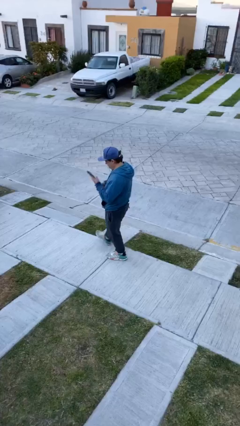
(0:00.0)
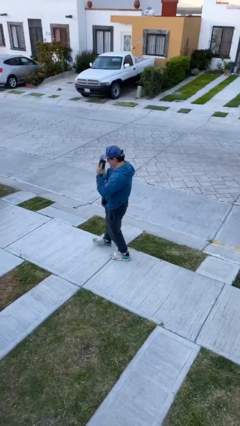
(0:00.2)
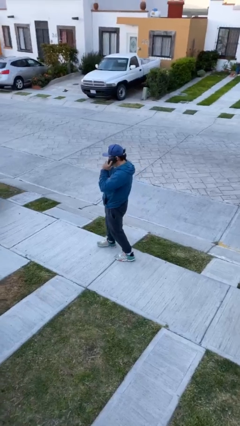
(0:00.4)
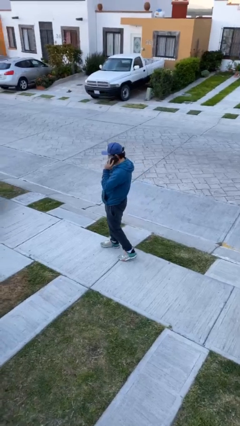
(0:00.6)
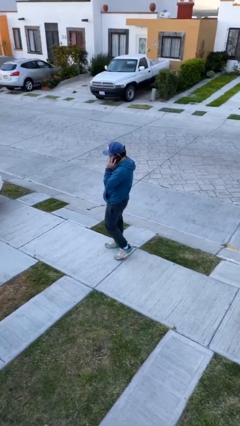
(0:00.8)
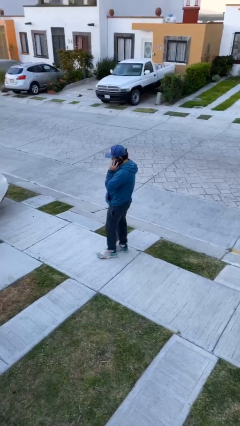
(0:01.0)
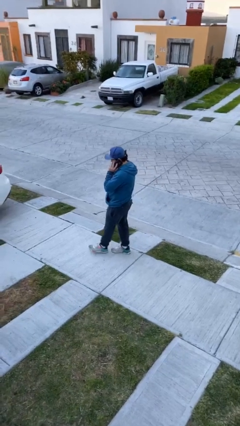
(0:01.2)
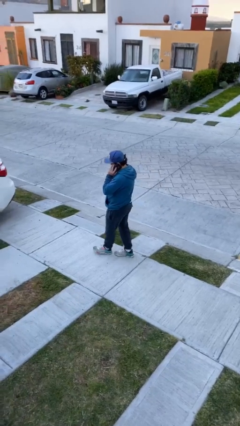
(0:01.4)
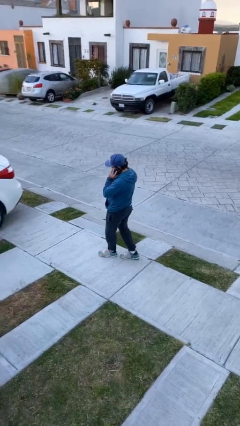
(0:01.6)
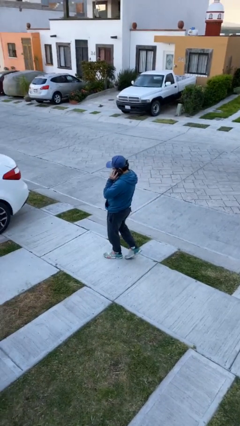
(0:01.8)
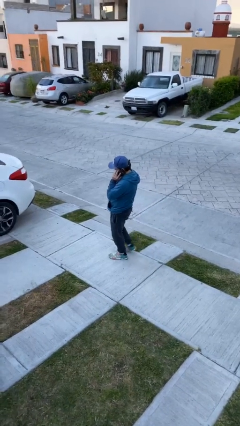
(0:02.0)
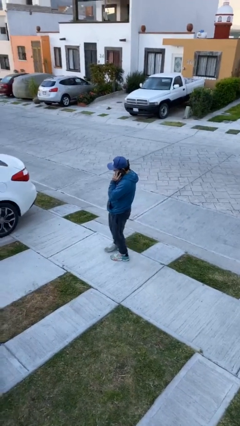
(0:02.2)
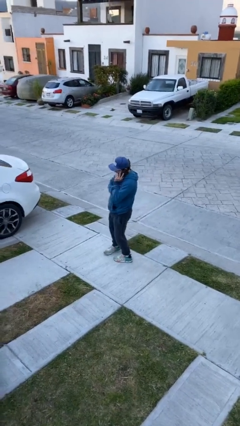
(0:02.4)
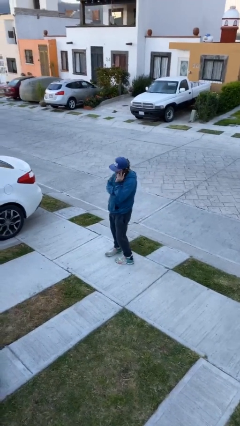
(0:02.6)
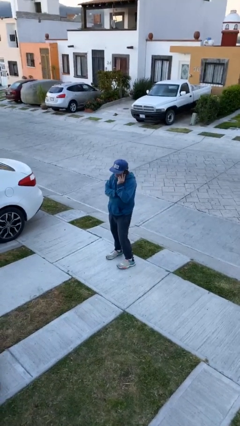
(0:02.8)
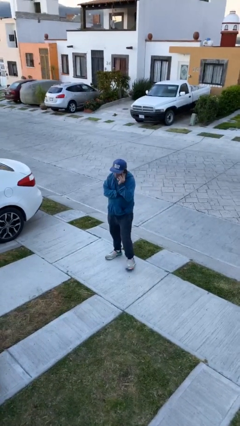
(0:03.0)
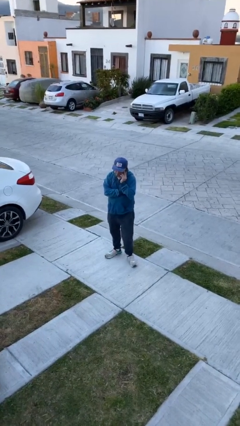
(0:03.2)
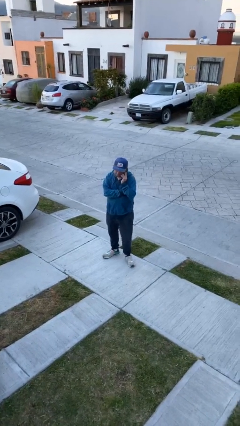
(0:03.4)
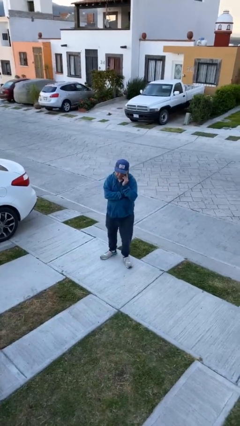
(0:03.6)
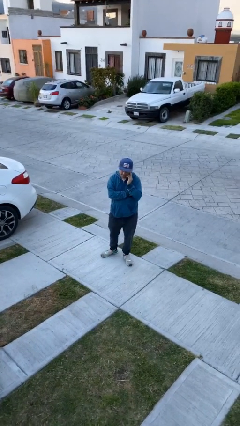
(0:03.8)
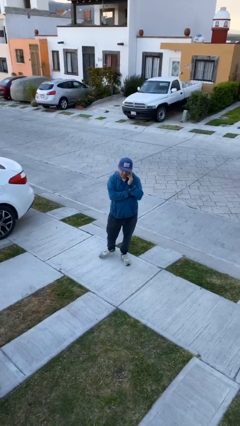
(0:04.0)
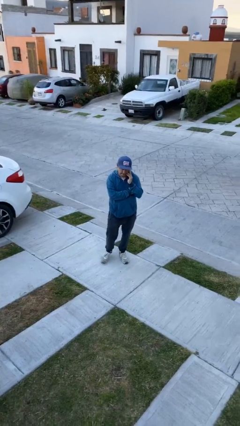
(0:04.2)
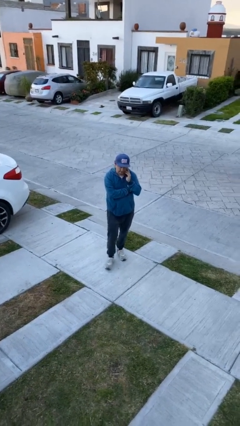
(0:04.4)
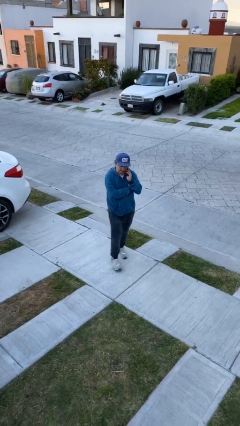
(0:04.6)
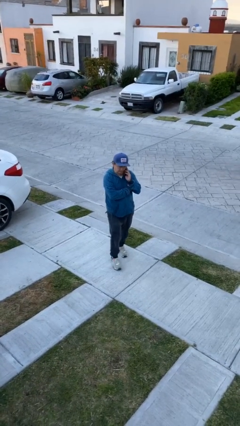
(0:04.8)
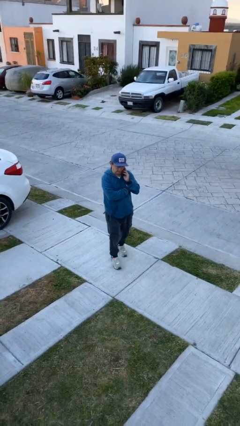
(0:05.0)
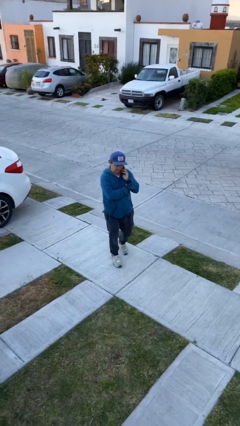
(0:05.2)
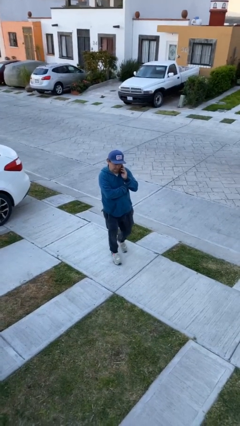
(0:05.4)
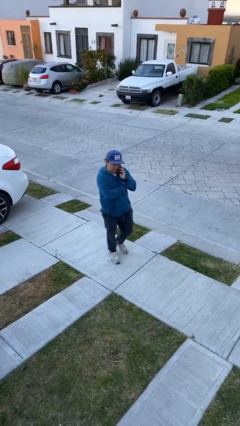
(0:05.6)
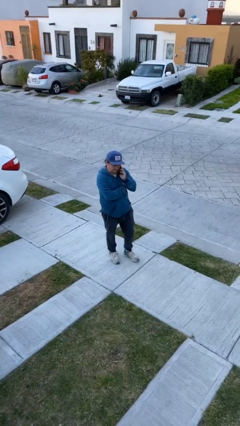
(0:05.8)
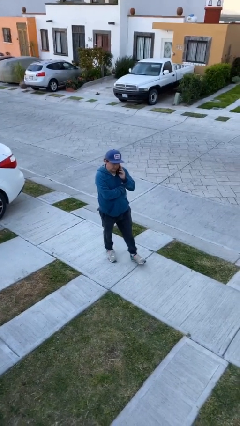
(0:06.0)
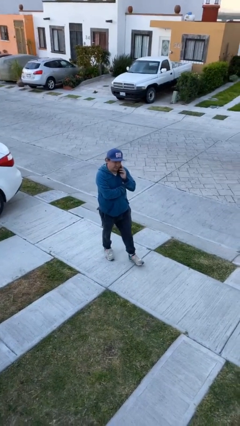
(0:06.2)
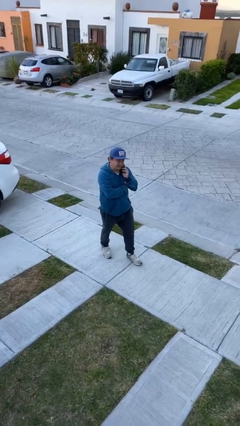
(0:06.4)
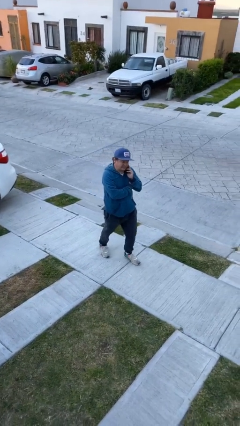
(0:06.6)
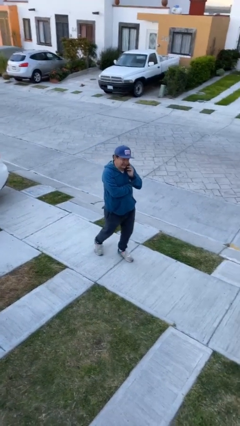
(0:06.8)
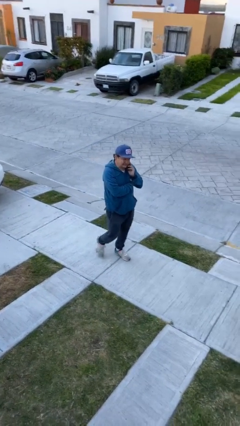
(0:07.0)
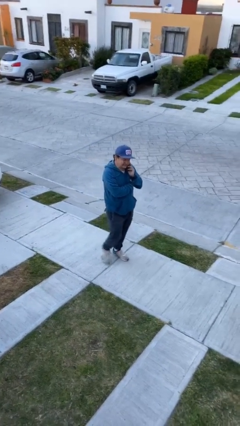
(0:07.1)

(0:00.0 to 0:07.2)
person talks on phone

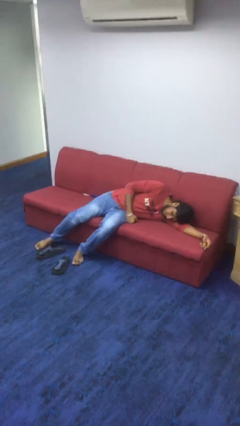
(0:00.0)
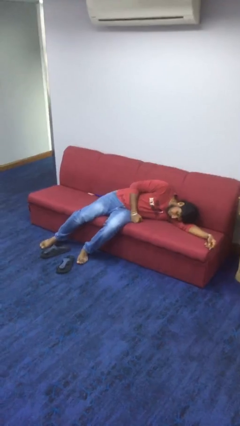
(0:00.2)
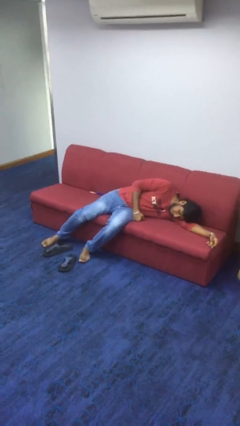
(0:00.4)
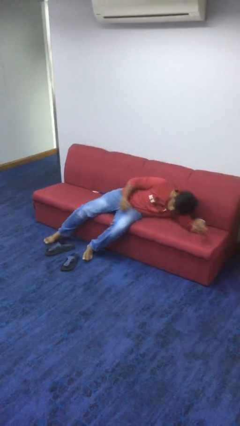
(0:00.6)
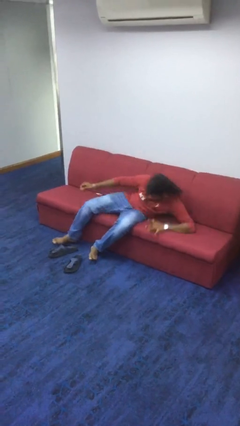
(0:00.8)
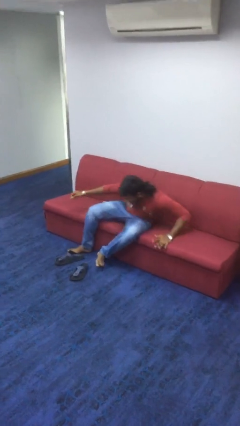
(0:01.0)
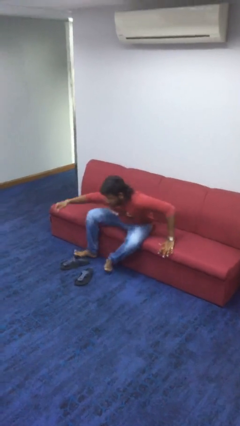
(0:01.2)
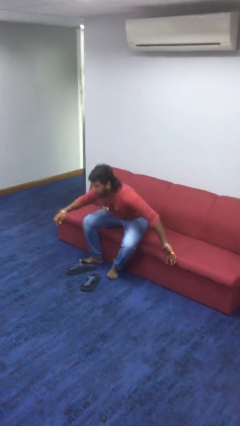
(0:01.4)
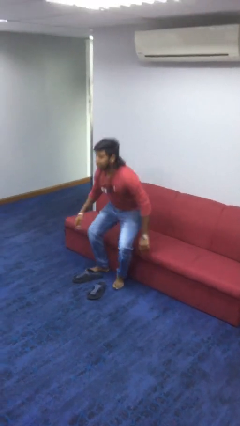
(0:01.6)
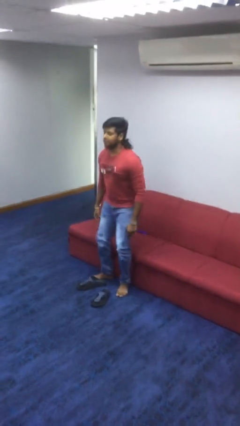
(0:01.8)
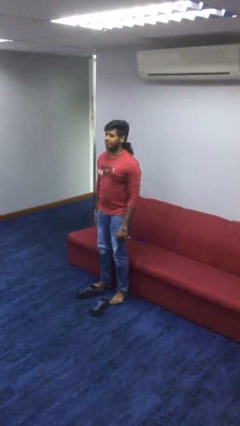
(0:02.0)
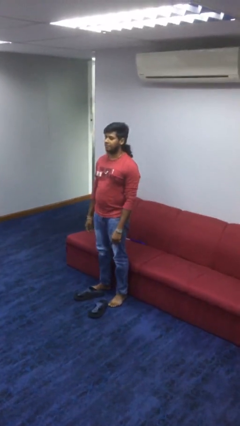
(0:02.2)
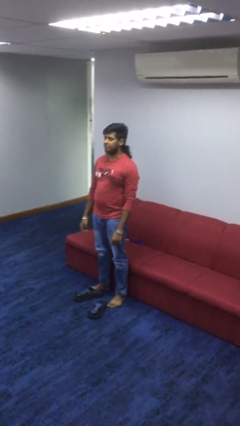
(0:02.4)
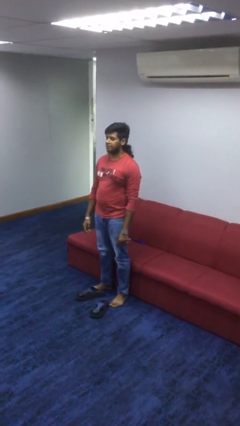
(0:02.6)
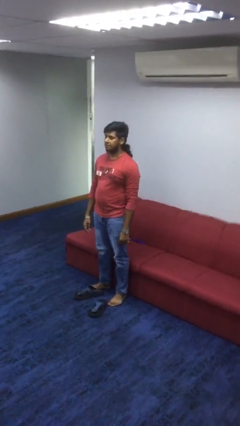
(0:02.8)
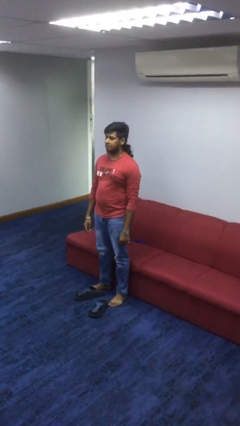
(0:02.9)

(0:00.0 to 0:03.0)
person stands up

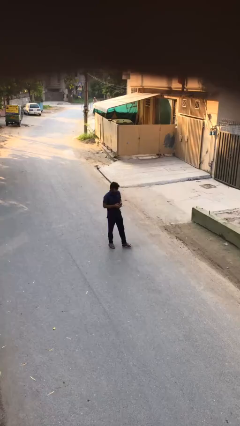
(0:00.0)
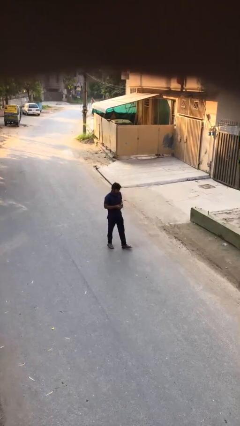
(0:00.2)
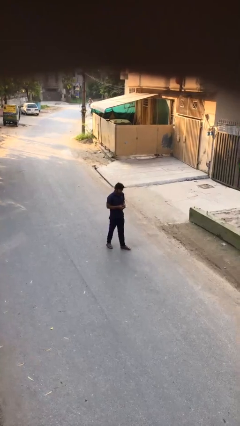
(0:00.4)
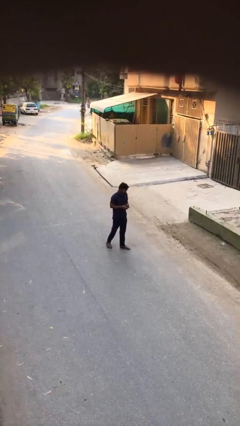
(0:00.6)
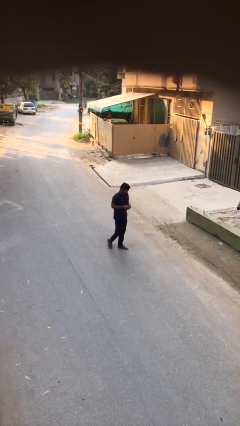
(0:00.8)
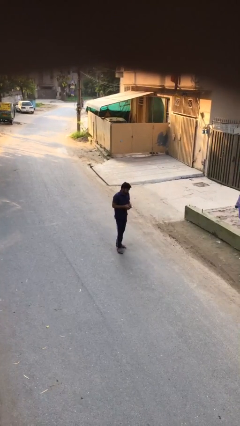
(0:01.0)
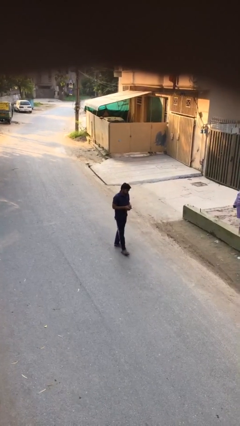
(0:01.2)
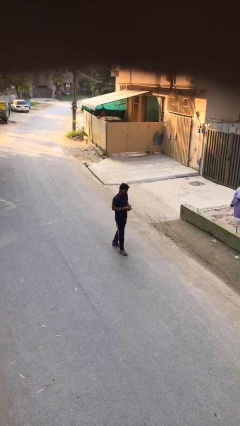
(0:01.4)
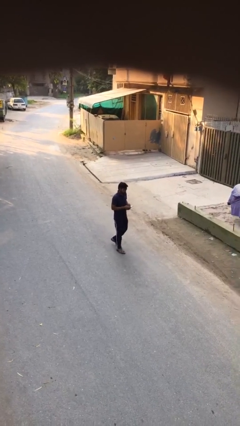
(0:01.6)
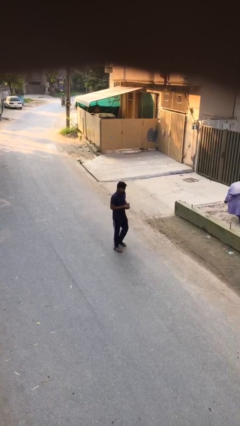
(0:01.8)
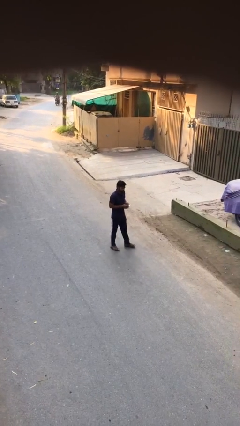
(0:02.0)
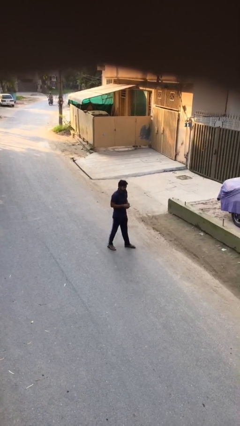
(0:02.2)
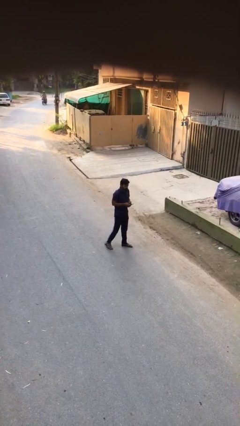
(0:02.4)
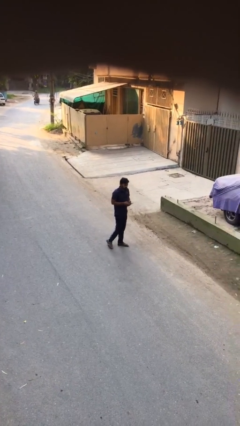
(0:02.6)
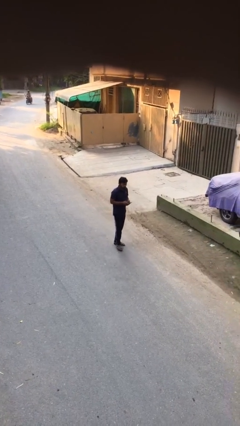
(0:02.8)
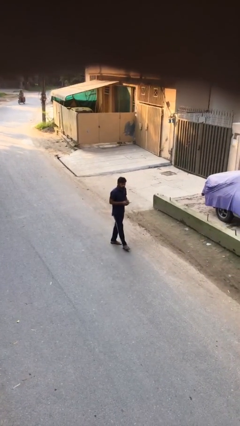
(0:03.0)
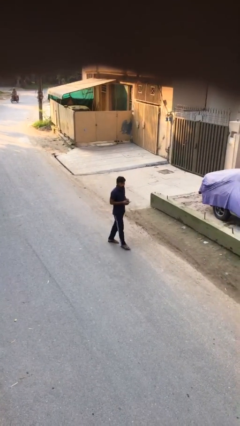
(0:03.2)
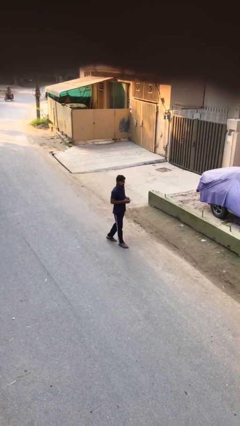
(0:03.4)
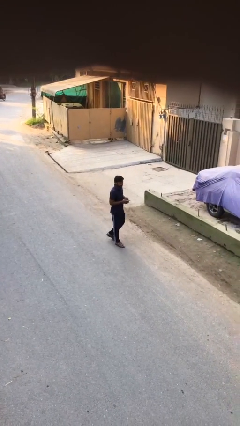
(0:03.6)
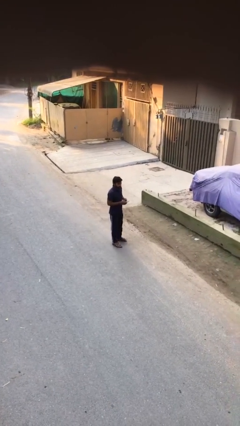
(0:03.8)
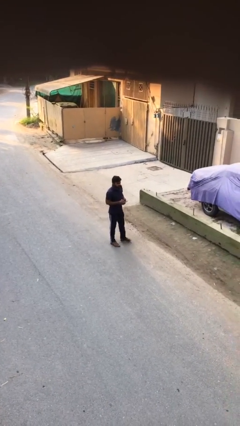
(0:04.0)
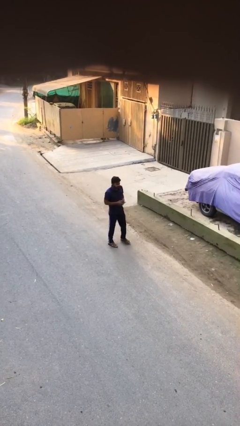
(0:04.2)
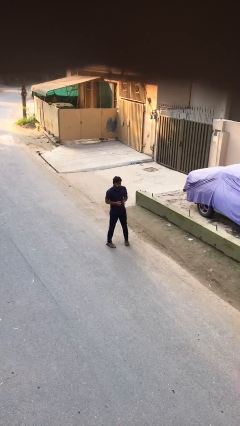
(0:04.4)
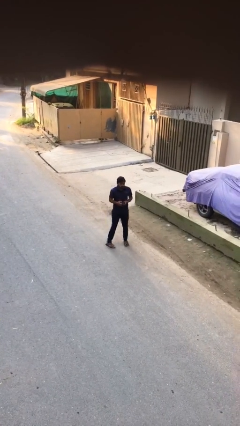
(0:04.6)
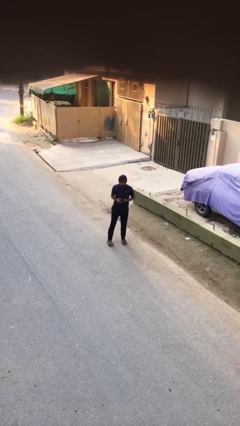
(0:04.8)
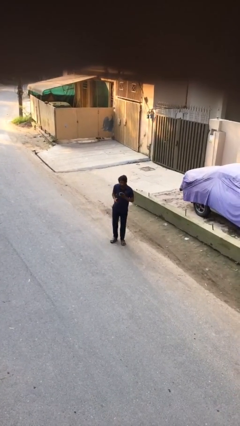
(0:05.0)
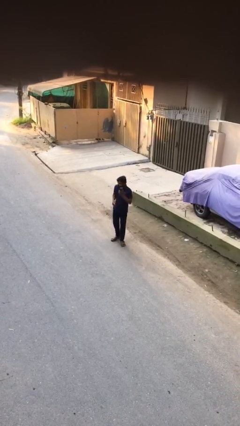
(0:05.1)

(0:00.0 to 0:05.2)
person texts on phone

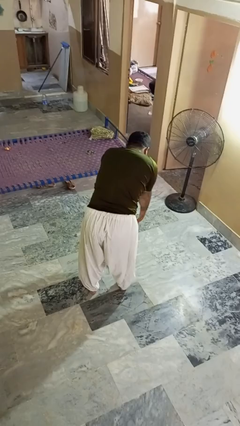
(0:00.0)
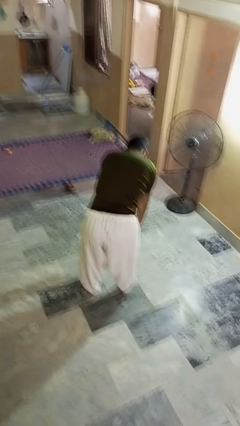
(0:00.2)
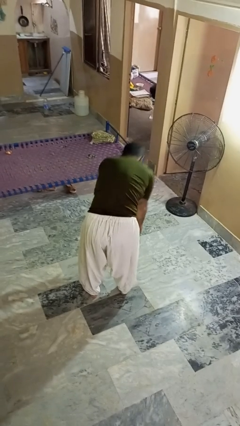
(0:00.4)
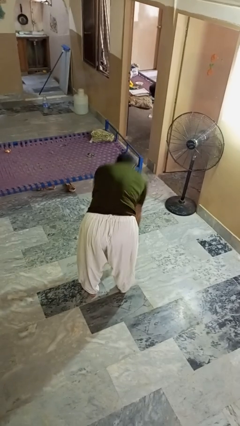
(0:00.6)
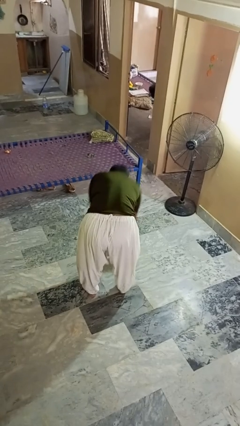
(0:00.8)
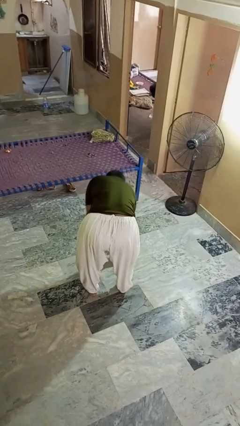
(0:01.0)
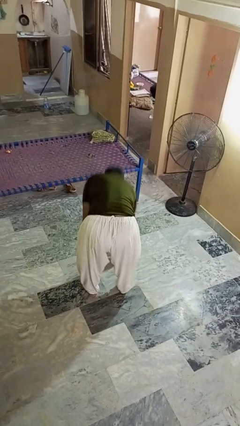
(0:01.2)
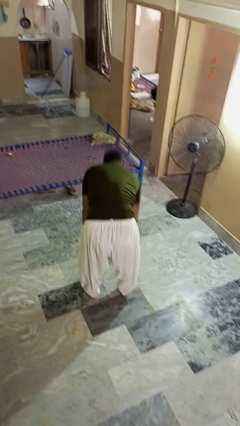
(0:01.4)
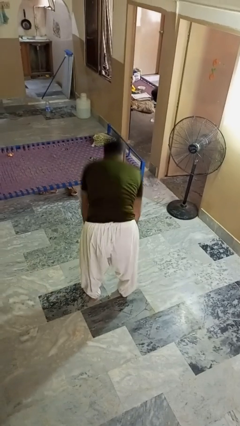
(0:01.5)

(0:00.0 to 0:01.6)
person picks up object from floor

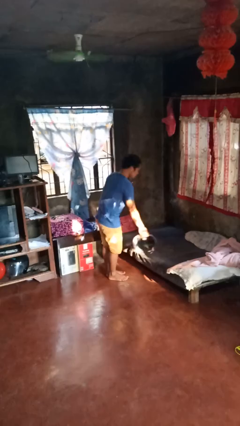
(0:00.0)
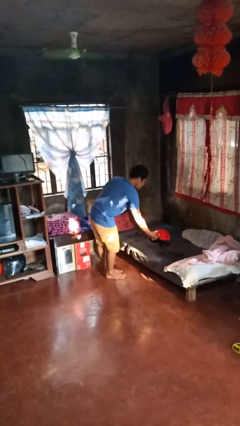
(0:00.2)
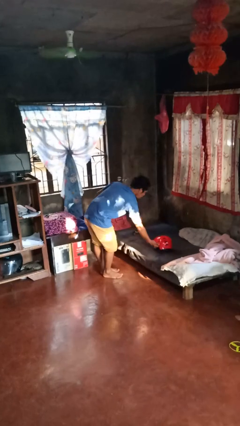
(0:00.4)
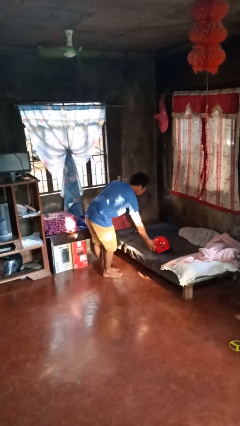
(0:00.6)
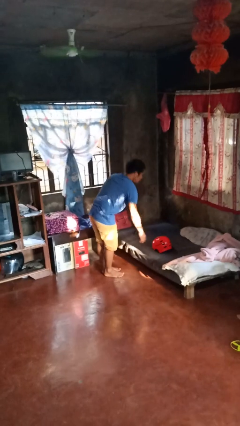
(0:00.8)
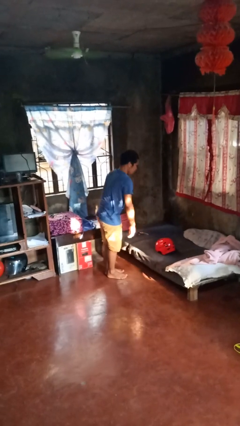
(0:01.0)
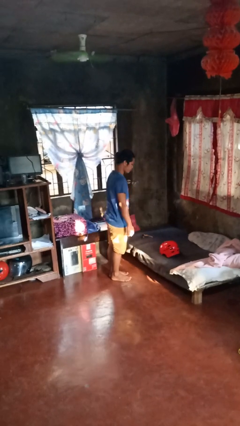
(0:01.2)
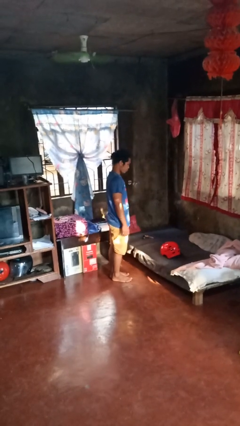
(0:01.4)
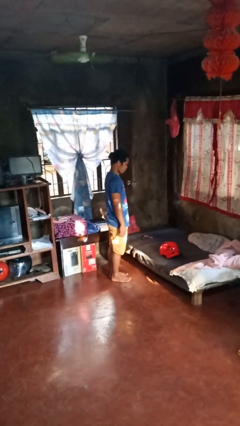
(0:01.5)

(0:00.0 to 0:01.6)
person puts down object on bed
